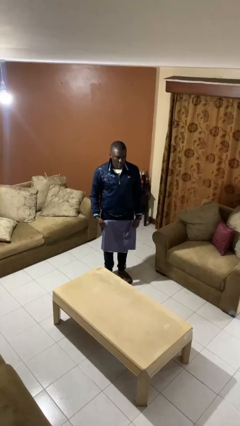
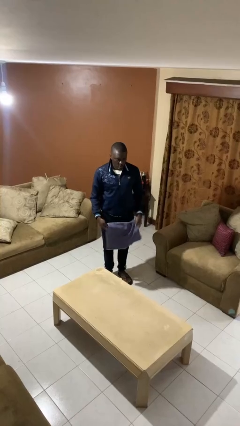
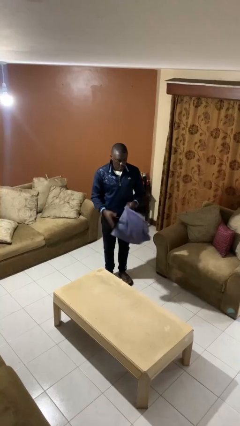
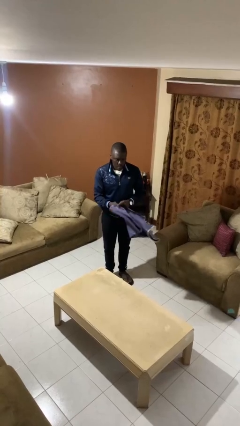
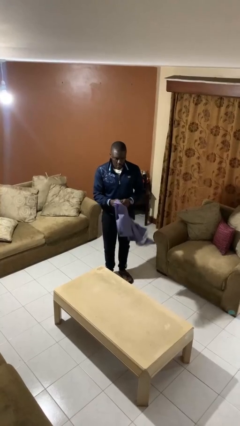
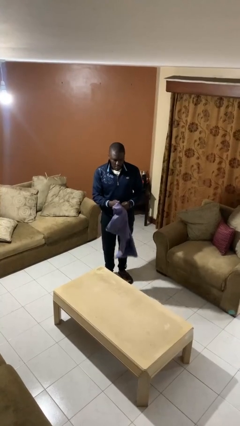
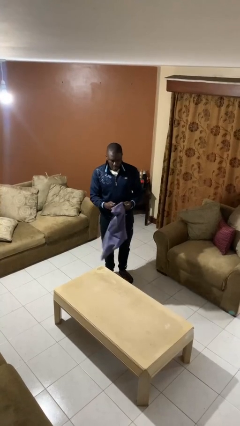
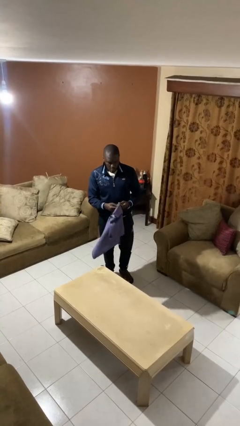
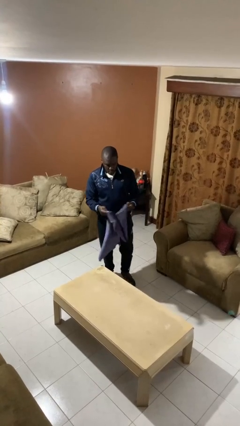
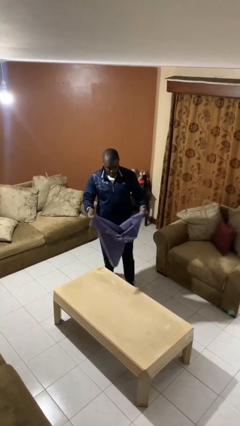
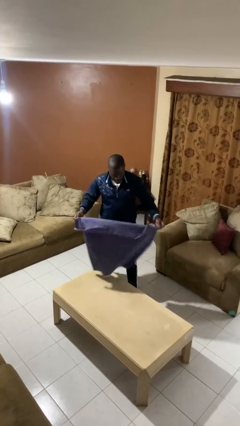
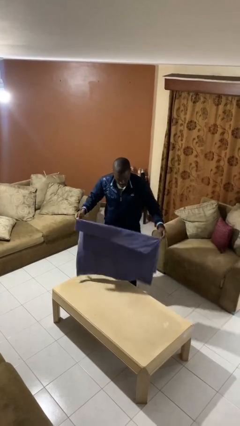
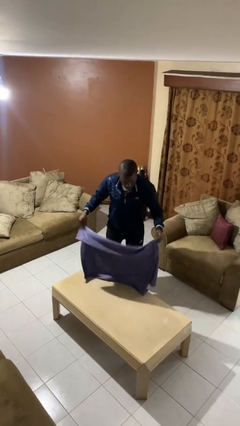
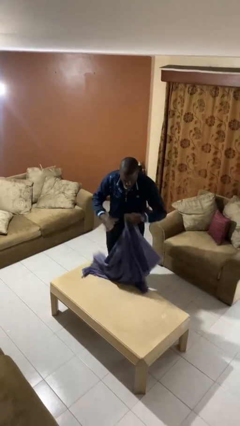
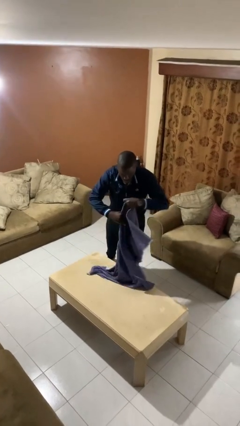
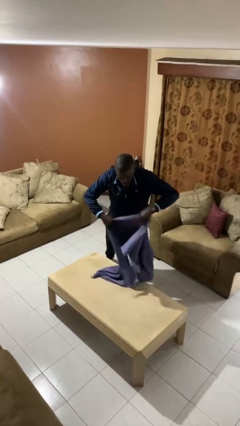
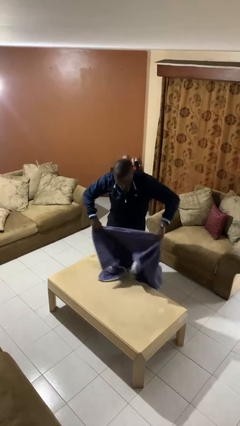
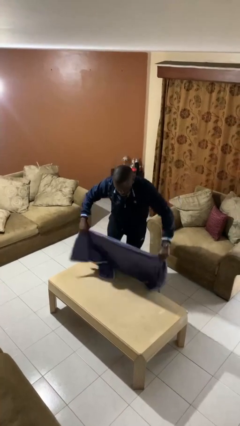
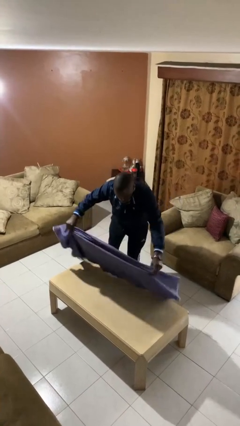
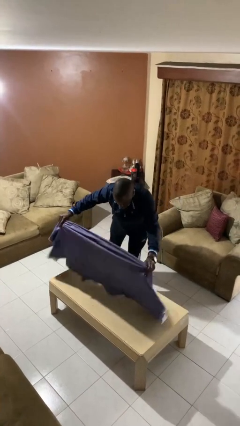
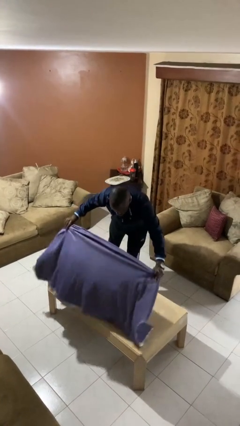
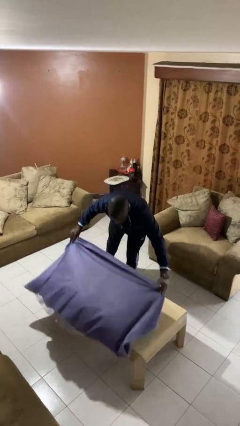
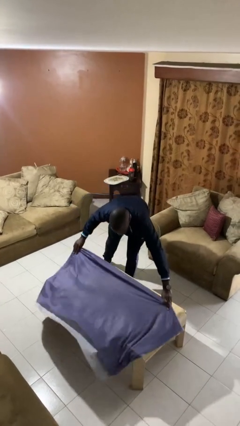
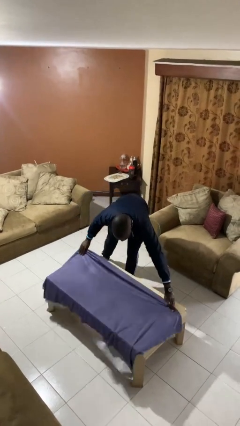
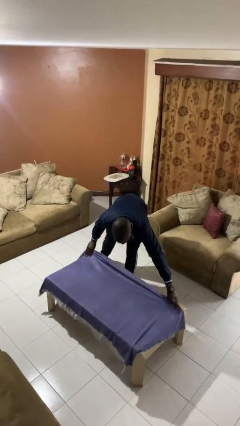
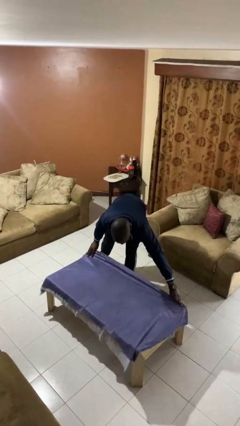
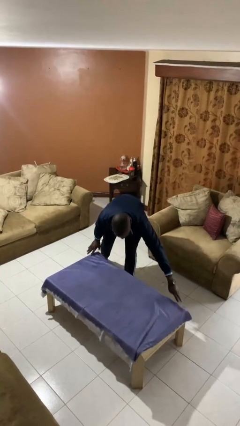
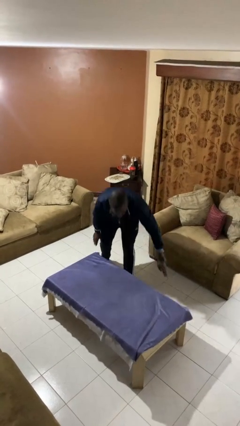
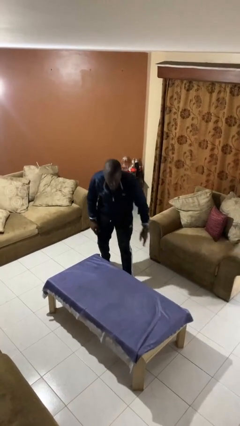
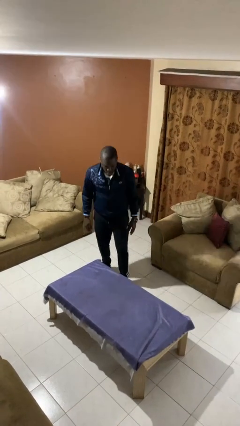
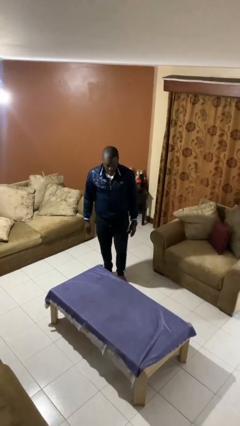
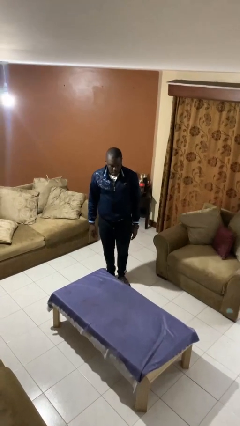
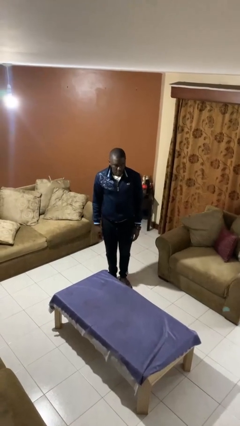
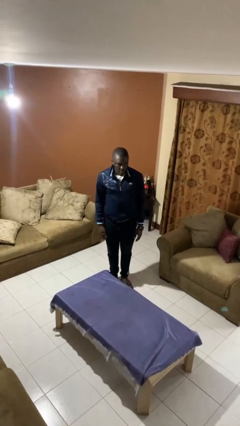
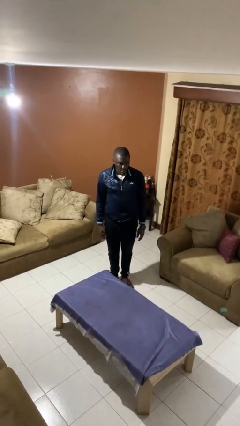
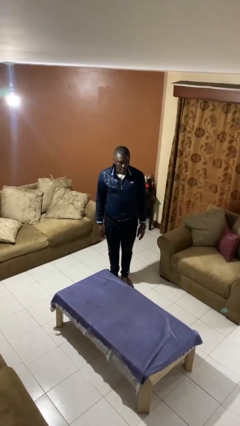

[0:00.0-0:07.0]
person spreads tablecloth

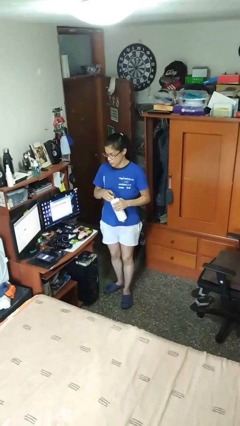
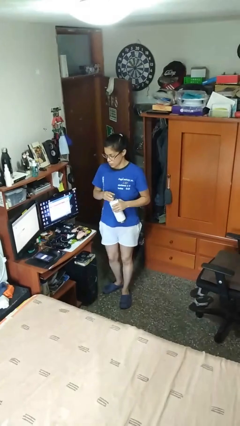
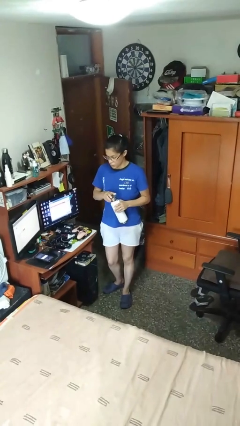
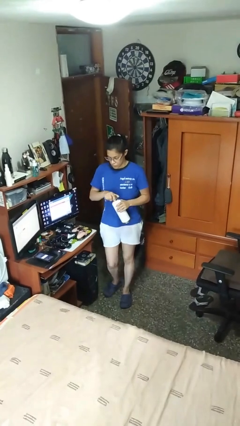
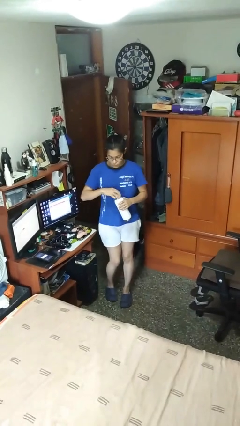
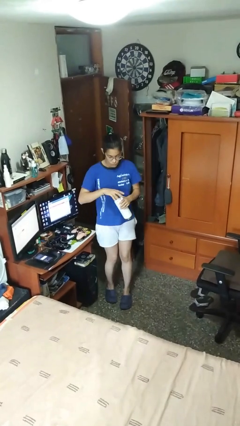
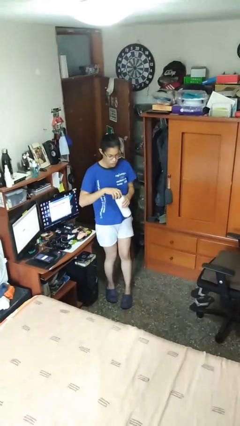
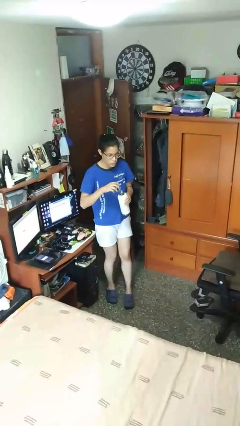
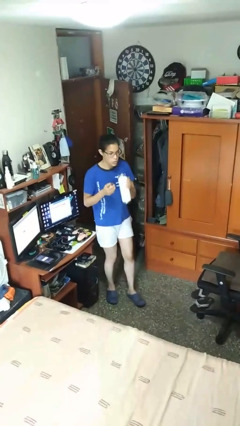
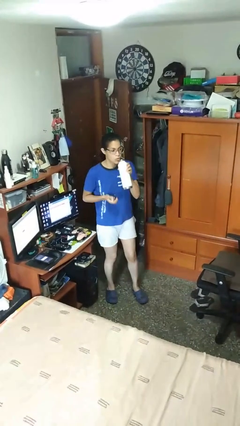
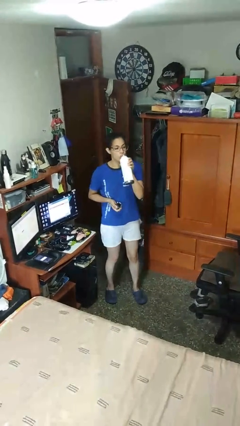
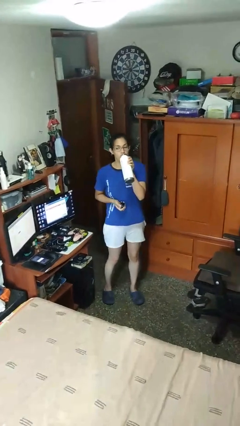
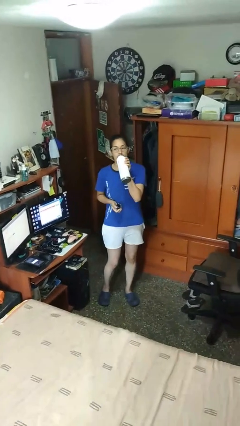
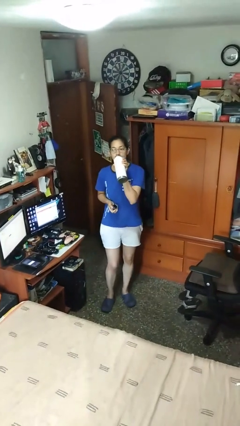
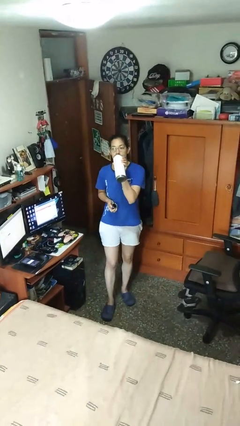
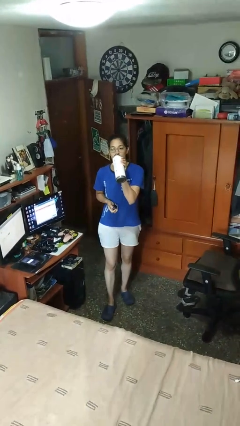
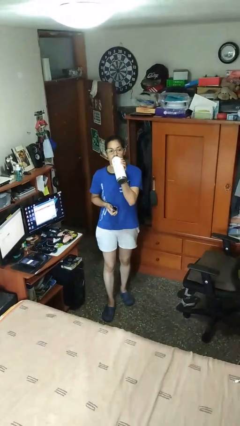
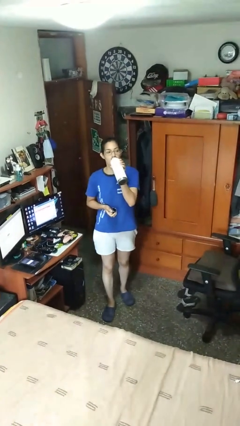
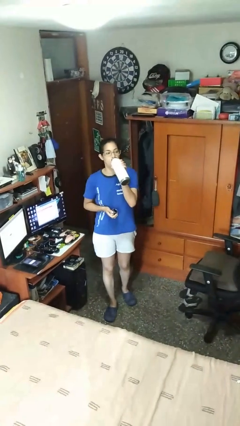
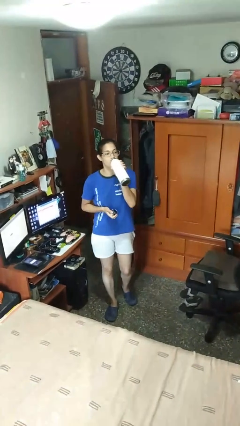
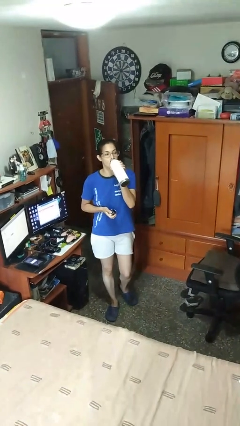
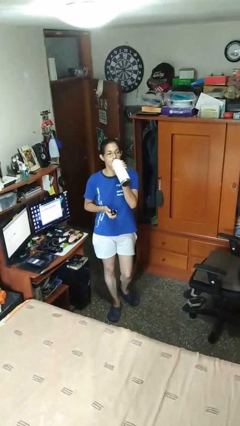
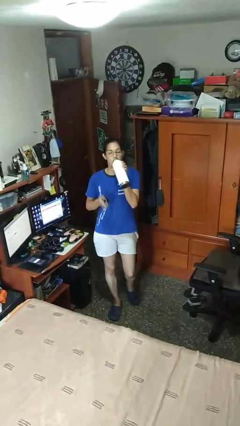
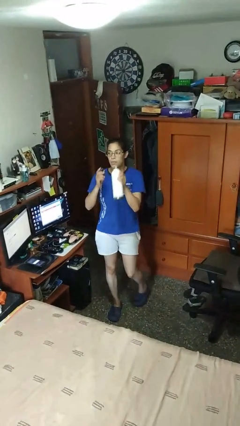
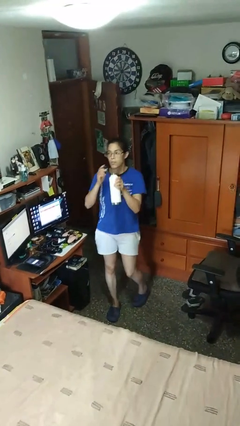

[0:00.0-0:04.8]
person drinks from bottle

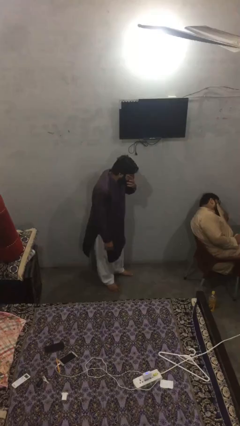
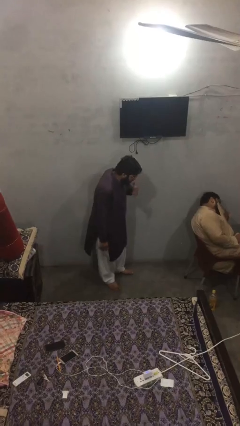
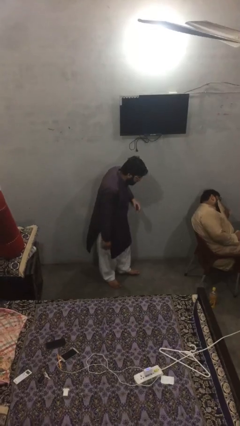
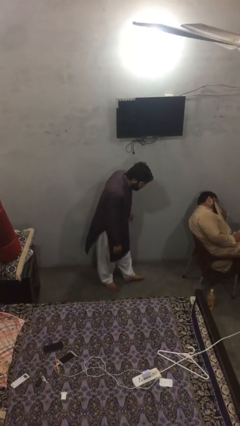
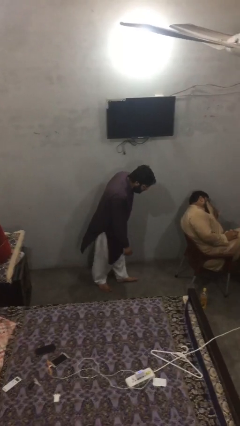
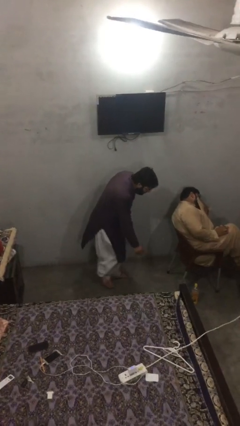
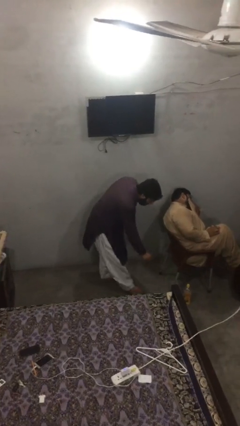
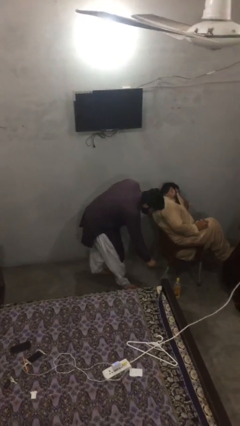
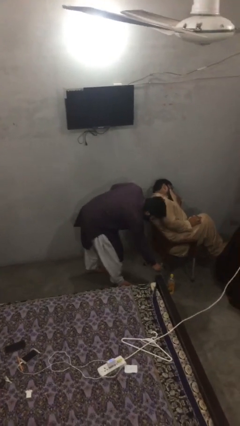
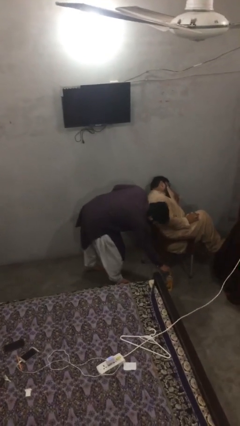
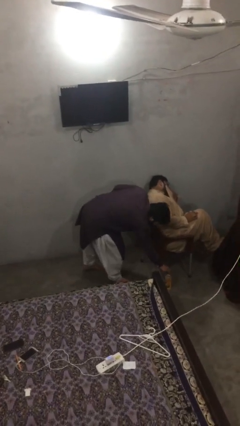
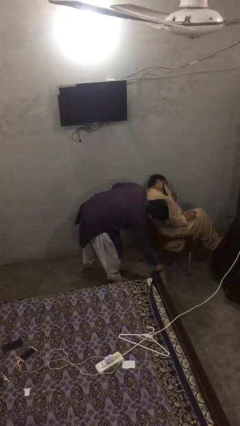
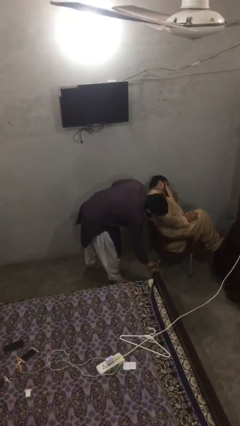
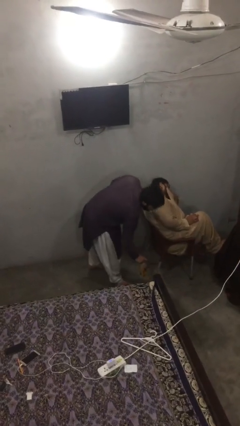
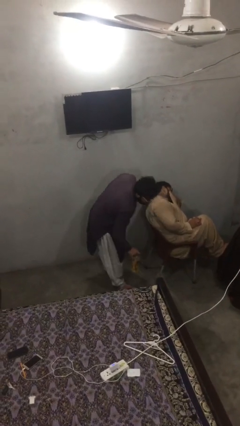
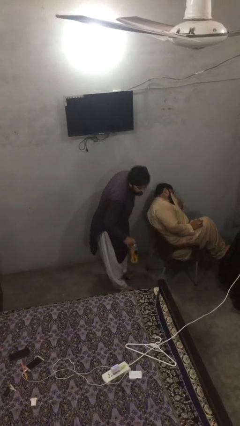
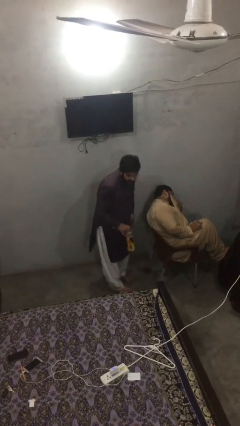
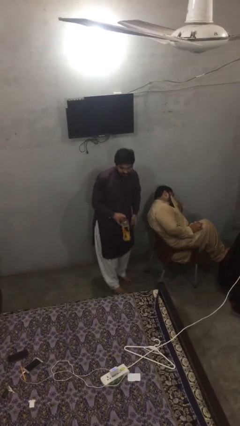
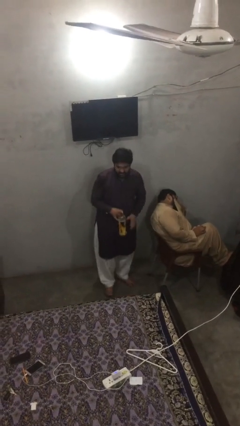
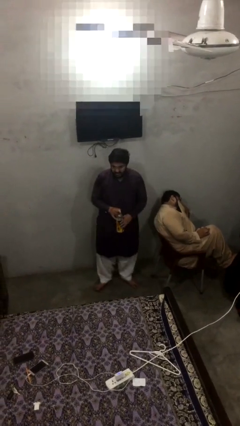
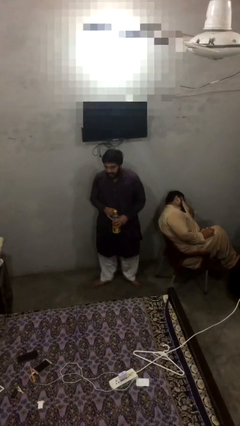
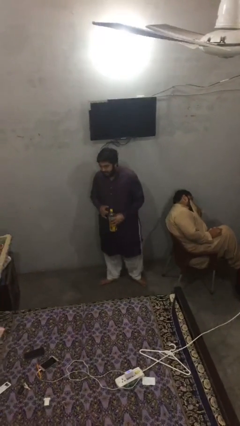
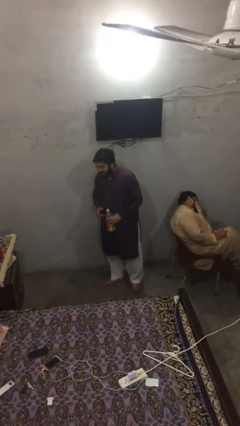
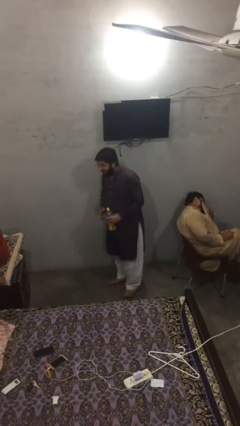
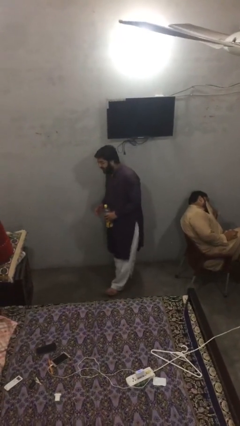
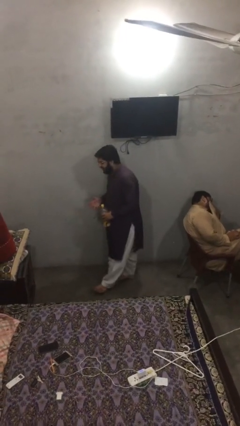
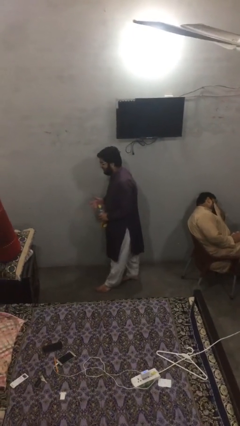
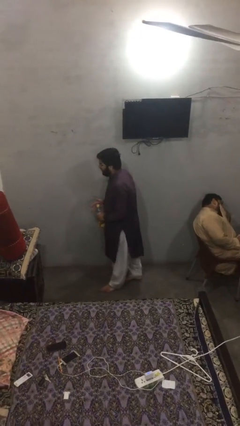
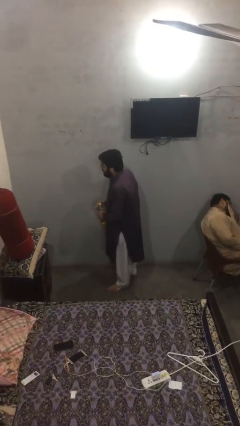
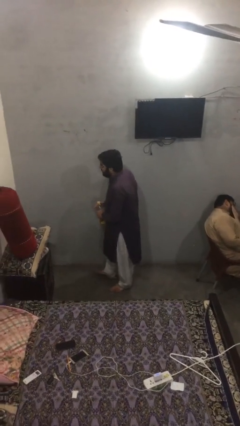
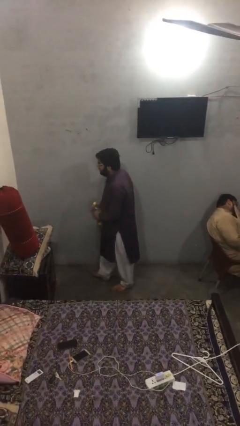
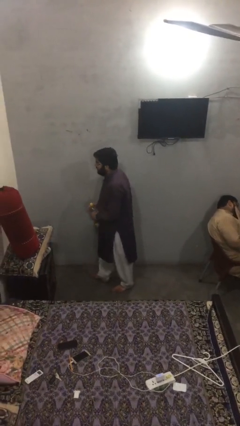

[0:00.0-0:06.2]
person steals object from person
